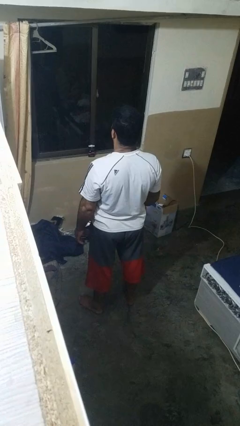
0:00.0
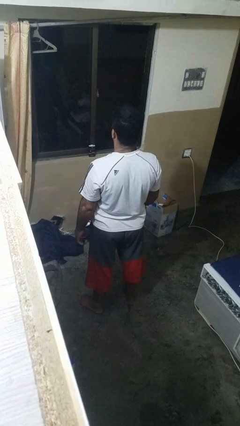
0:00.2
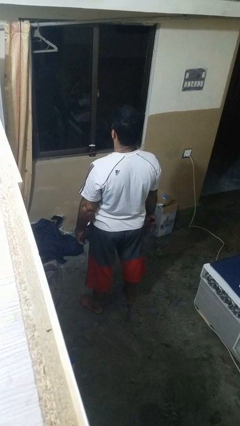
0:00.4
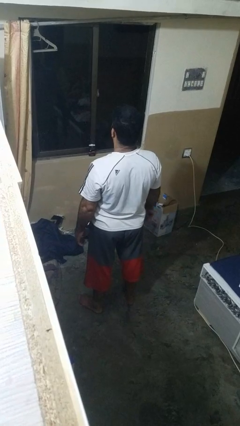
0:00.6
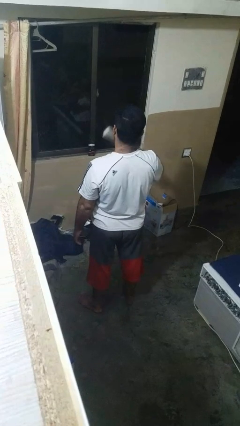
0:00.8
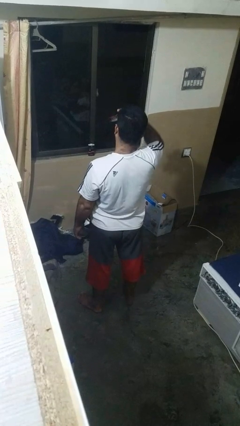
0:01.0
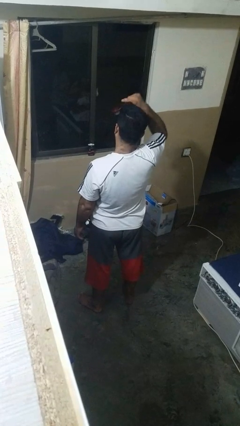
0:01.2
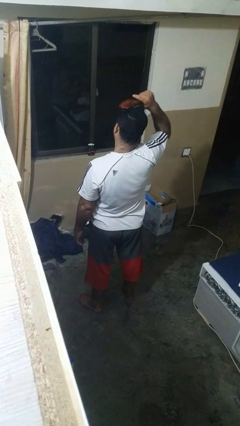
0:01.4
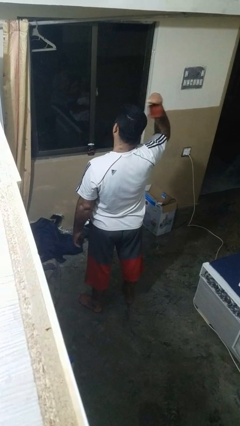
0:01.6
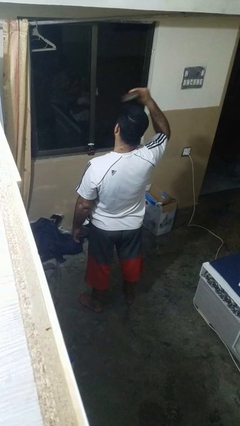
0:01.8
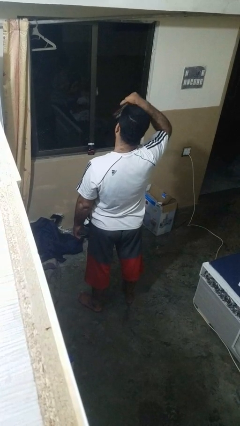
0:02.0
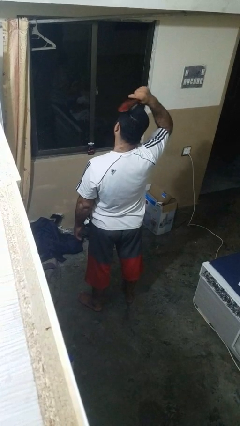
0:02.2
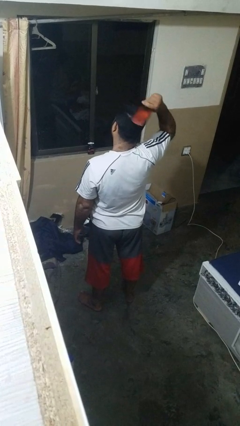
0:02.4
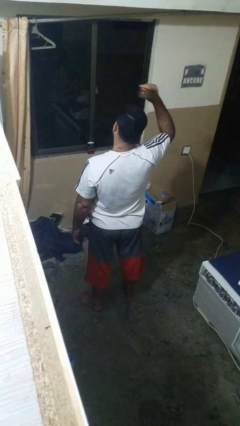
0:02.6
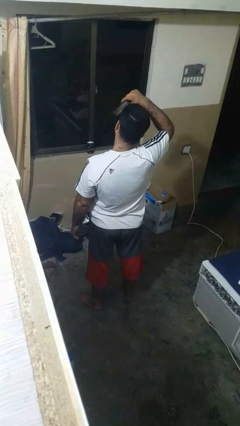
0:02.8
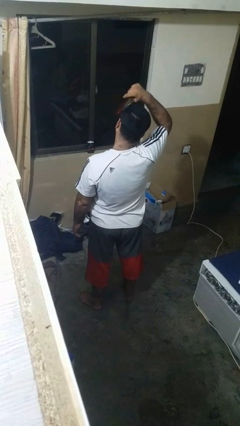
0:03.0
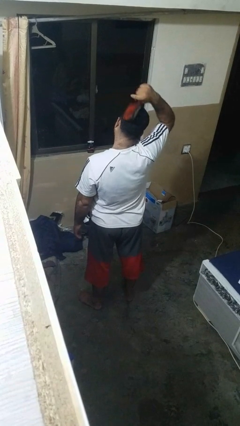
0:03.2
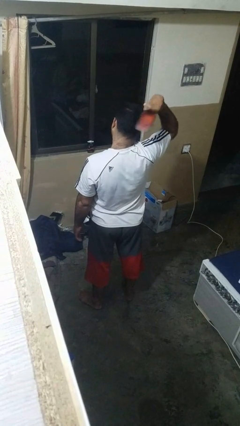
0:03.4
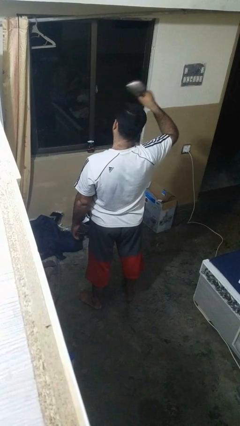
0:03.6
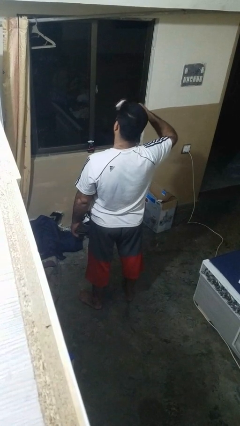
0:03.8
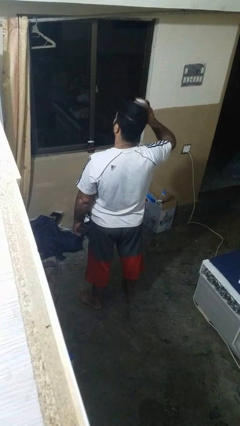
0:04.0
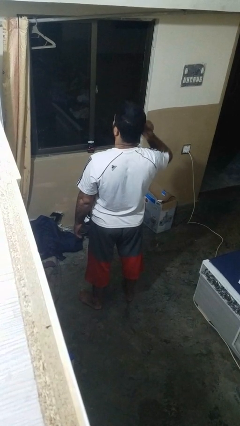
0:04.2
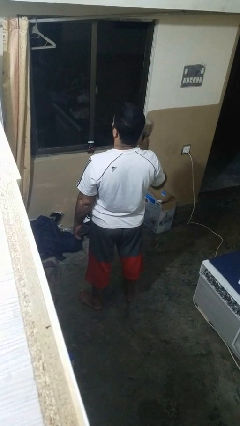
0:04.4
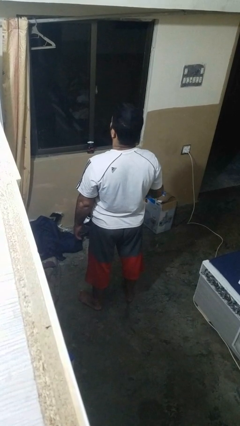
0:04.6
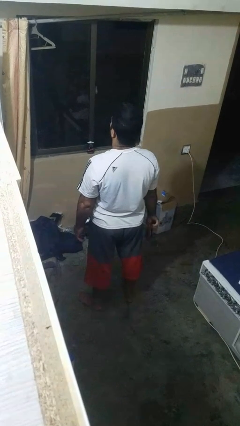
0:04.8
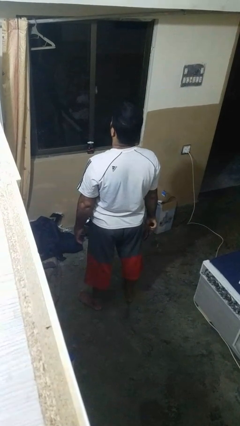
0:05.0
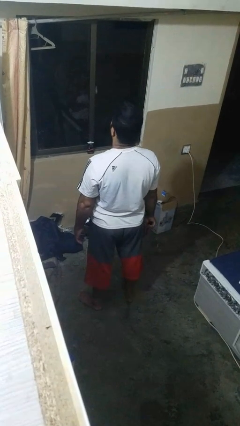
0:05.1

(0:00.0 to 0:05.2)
person brushes hair

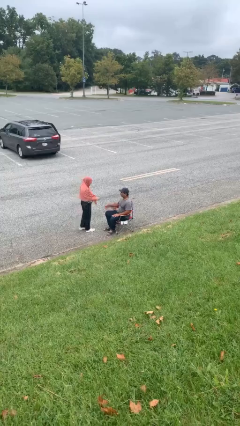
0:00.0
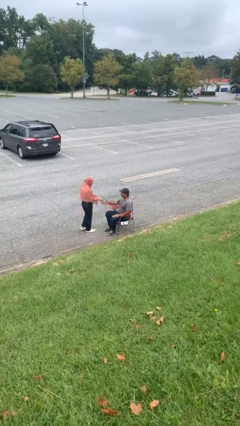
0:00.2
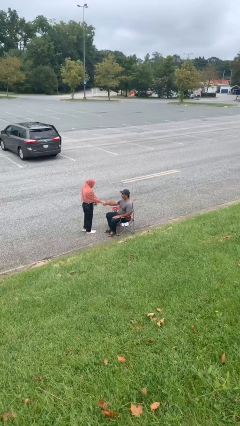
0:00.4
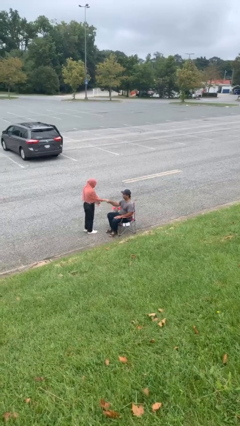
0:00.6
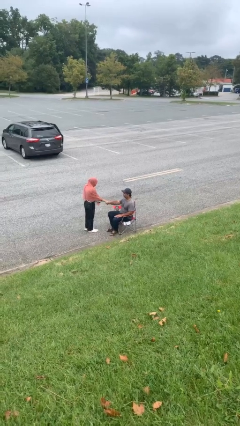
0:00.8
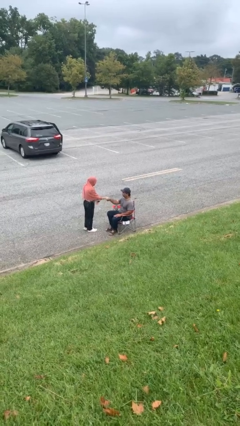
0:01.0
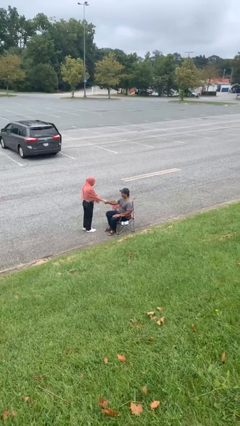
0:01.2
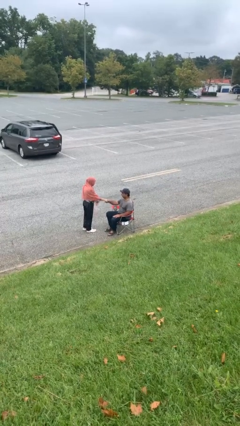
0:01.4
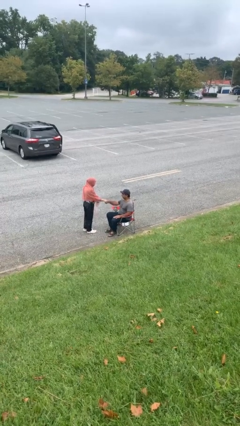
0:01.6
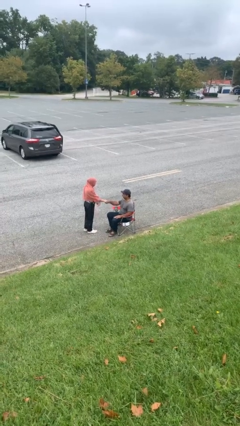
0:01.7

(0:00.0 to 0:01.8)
person shakes hand

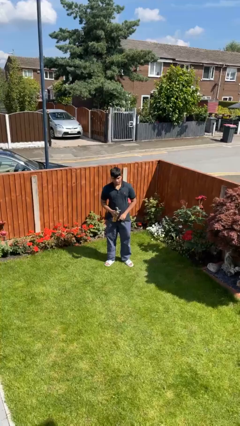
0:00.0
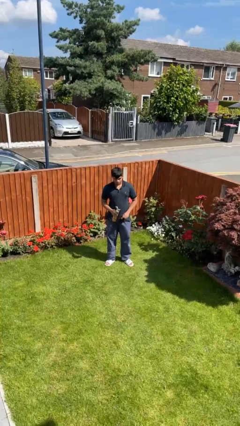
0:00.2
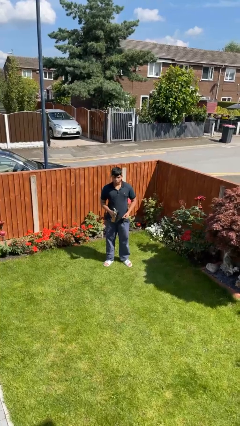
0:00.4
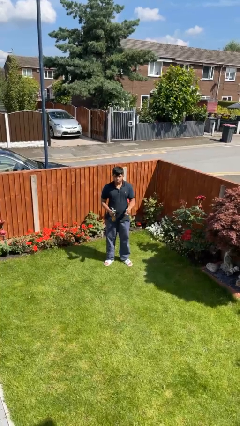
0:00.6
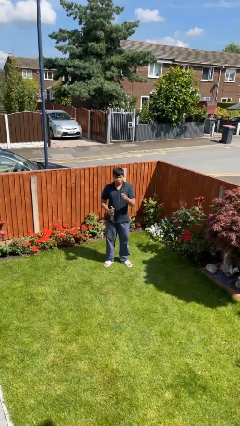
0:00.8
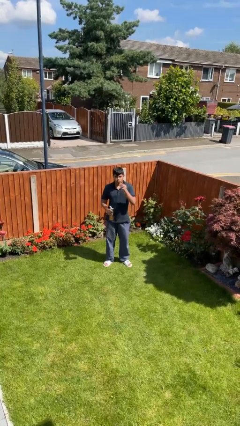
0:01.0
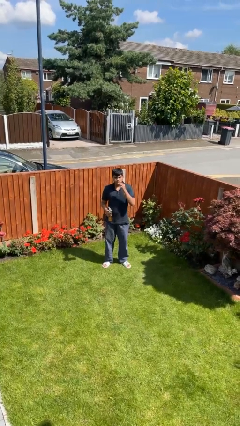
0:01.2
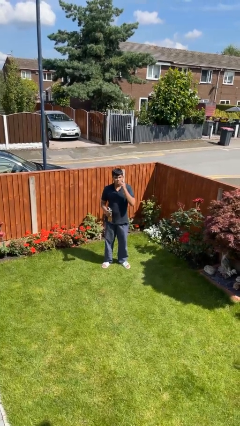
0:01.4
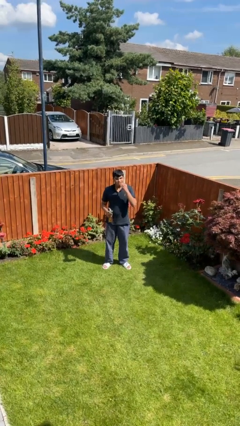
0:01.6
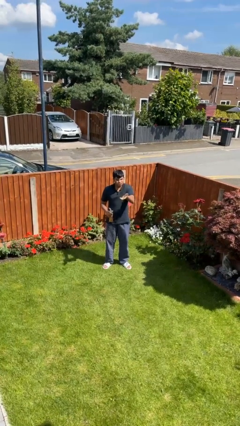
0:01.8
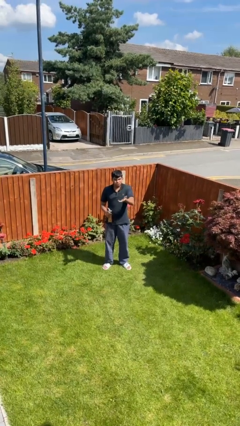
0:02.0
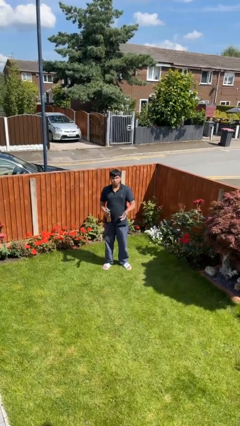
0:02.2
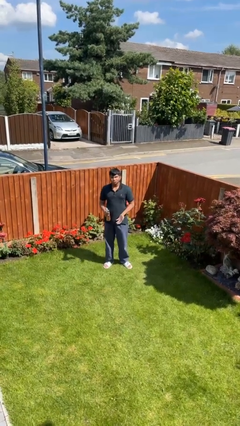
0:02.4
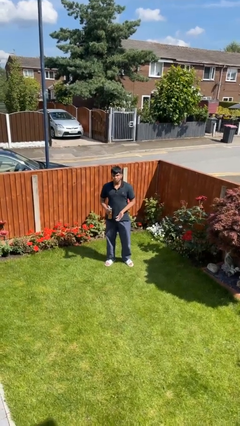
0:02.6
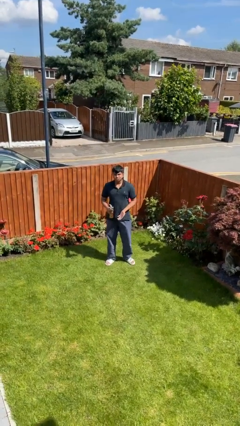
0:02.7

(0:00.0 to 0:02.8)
person eats snack from bag

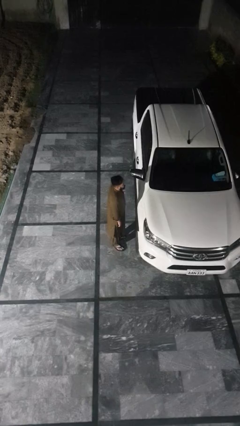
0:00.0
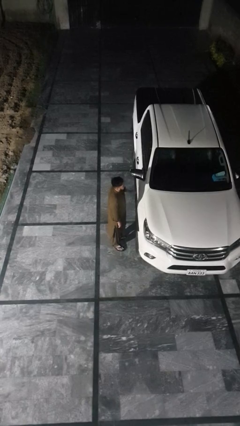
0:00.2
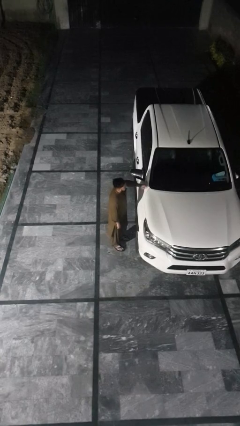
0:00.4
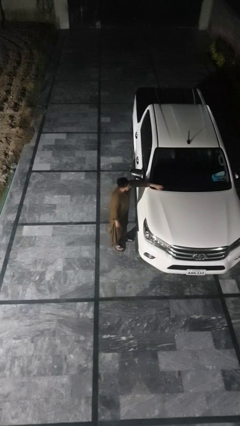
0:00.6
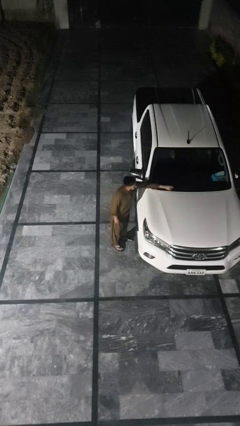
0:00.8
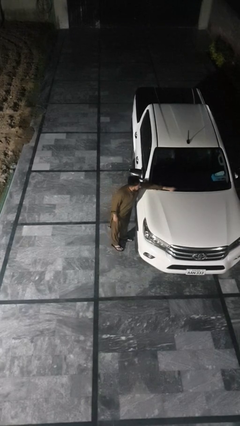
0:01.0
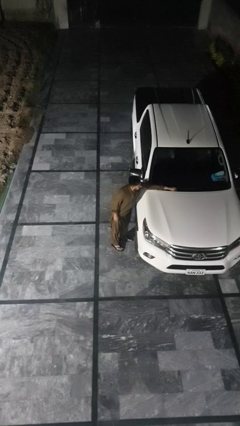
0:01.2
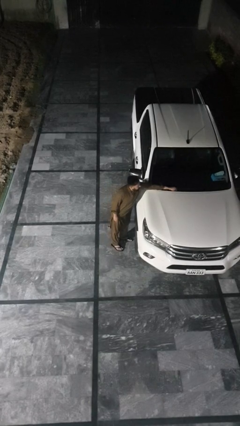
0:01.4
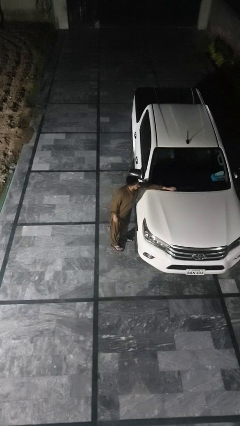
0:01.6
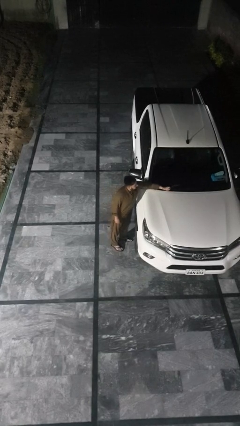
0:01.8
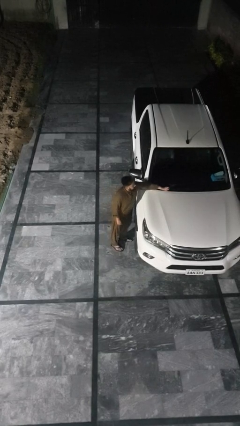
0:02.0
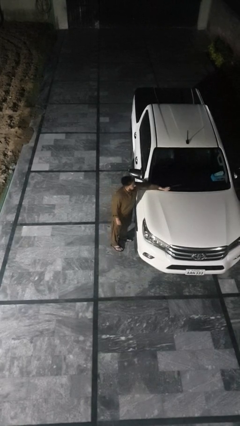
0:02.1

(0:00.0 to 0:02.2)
person flips up car wipers

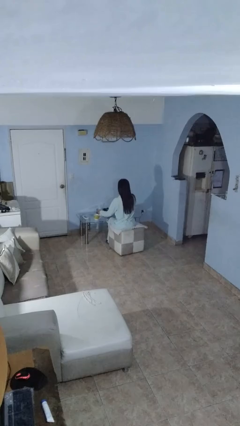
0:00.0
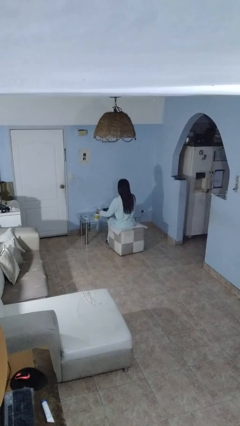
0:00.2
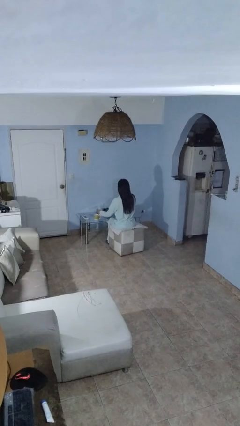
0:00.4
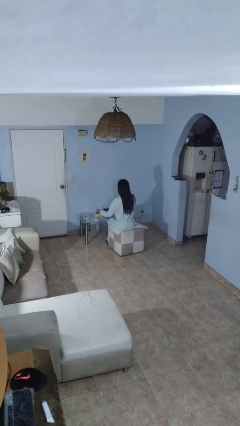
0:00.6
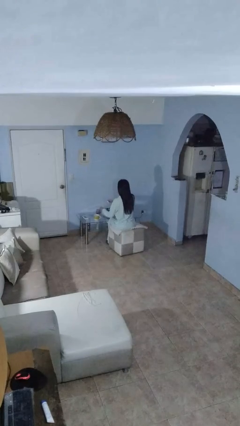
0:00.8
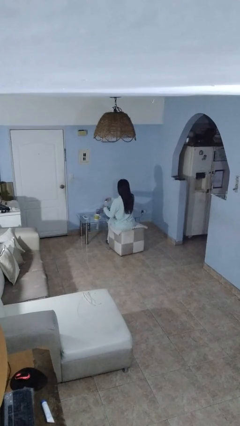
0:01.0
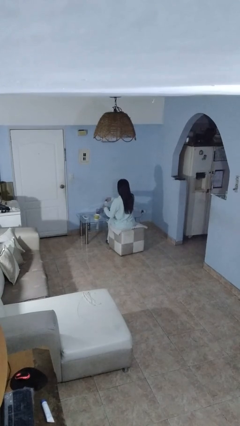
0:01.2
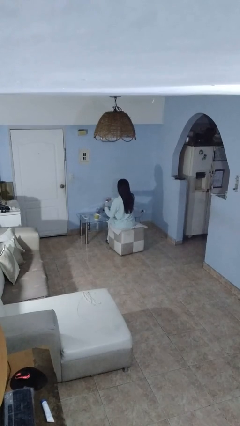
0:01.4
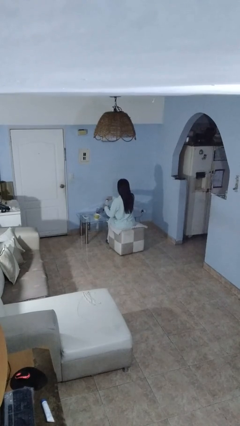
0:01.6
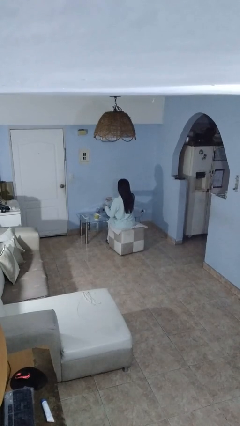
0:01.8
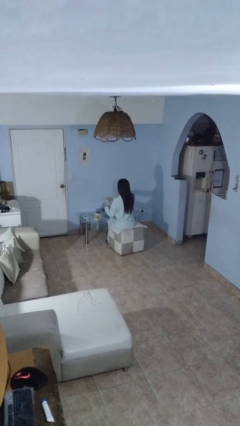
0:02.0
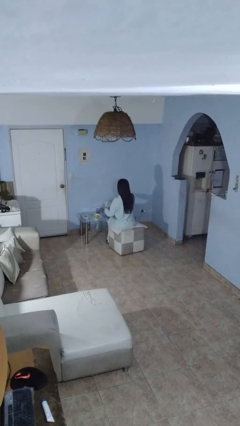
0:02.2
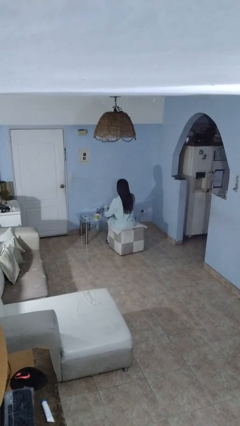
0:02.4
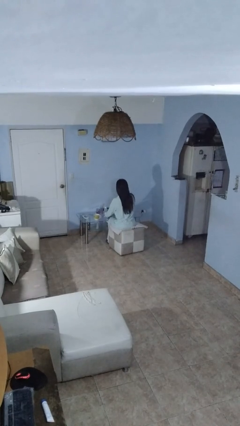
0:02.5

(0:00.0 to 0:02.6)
person screws lid to bottle

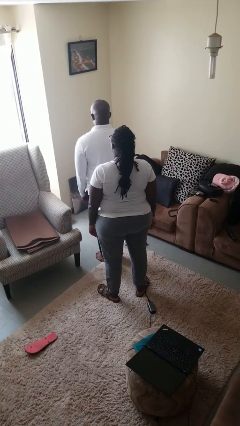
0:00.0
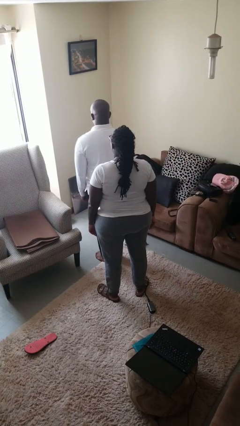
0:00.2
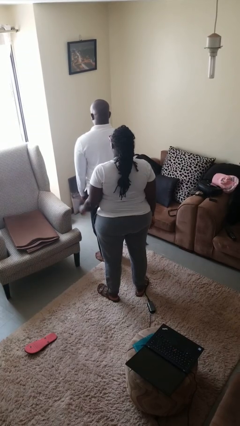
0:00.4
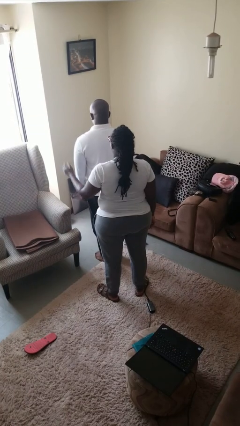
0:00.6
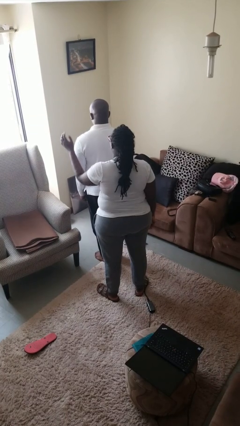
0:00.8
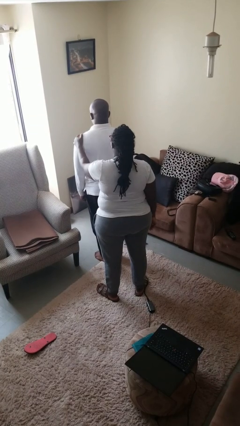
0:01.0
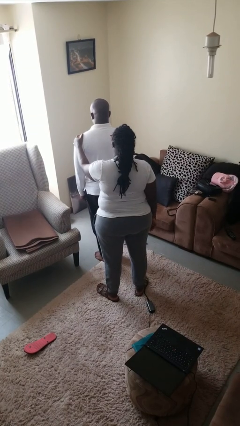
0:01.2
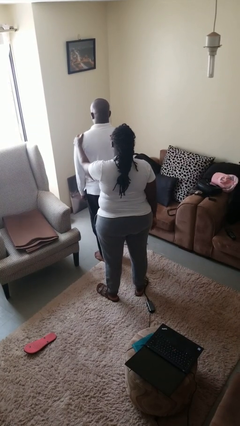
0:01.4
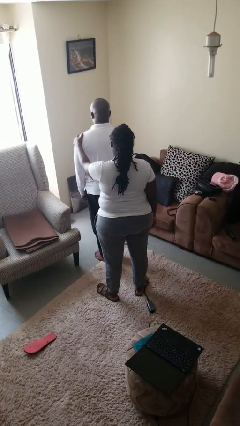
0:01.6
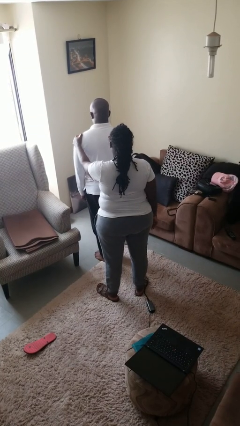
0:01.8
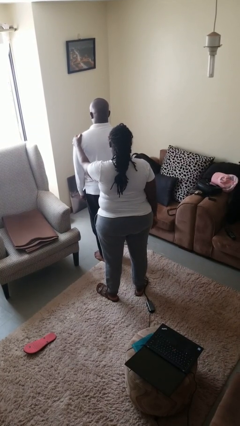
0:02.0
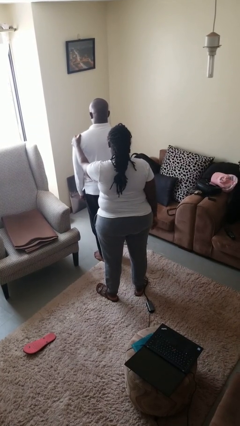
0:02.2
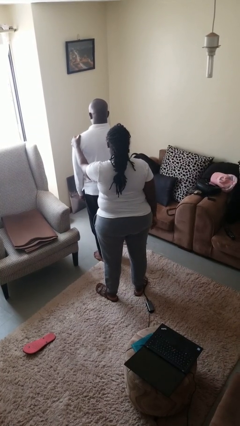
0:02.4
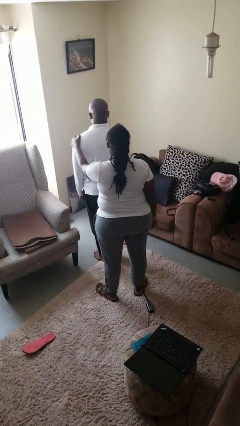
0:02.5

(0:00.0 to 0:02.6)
person grabs person by shoulder
